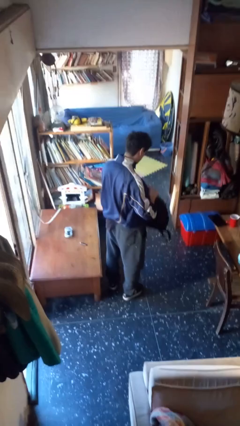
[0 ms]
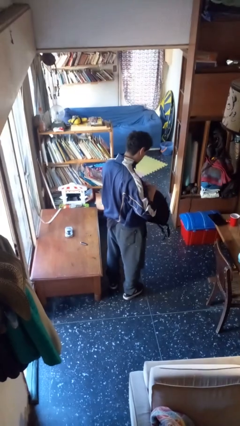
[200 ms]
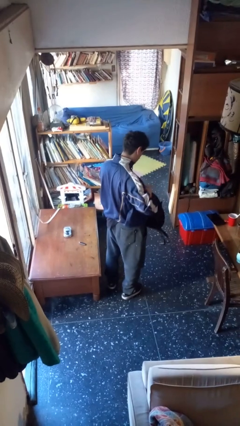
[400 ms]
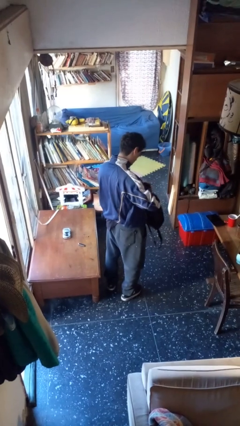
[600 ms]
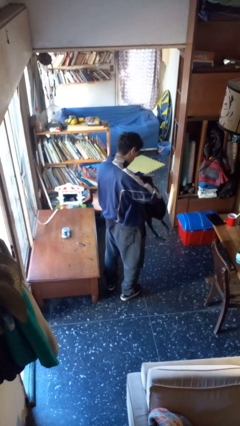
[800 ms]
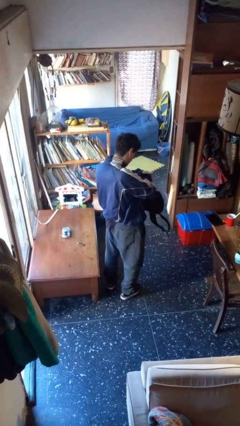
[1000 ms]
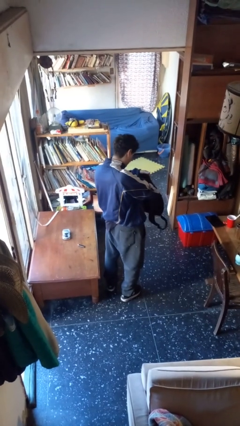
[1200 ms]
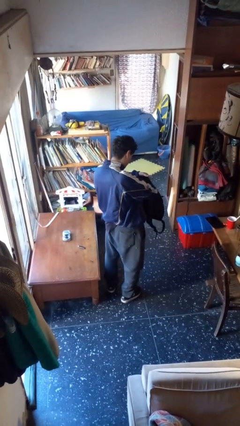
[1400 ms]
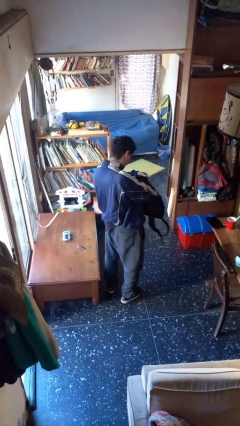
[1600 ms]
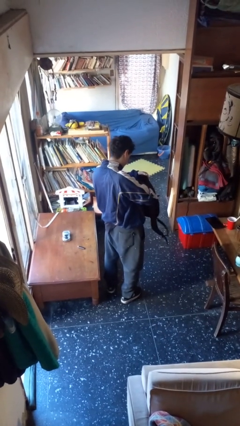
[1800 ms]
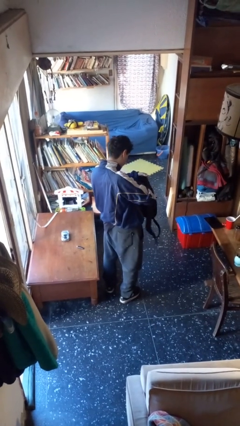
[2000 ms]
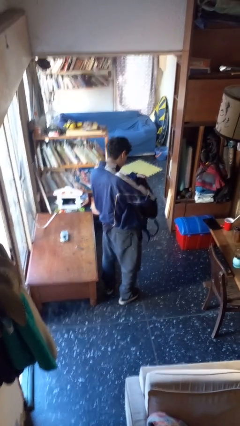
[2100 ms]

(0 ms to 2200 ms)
person searches in backpack

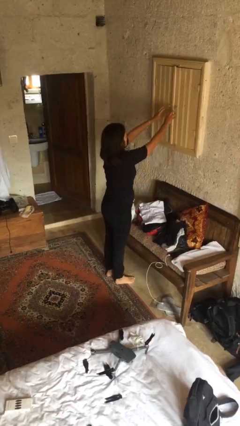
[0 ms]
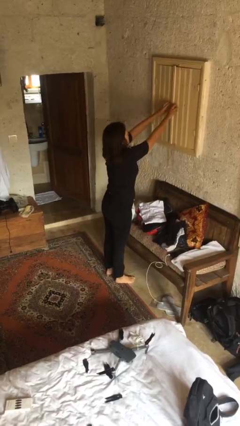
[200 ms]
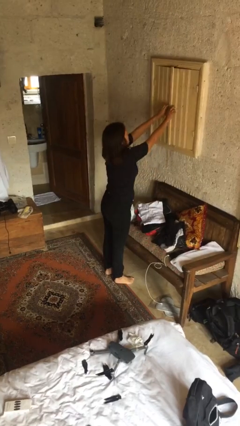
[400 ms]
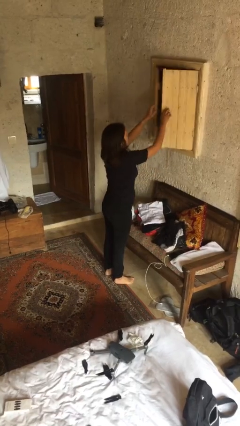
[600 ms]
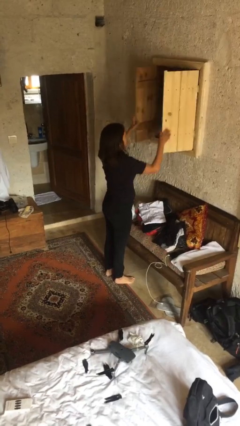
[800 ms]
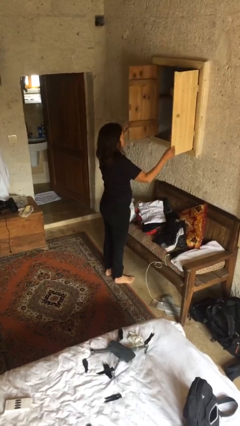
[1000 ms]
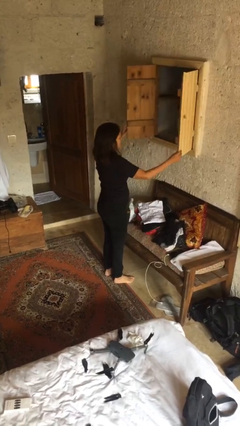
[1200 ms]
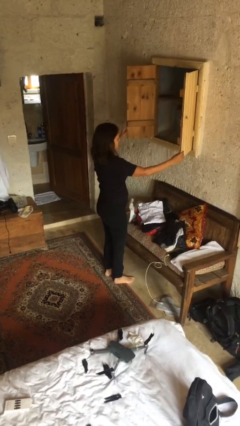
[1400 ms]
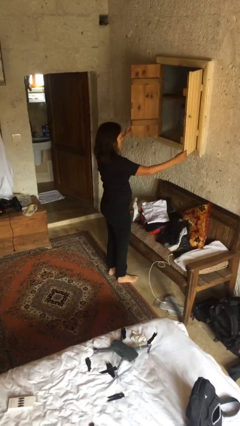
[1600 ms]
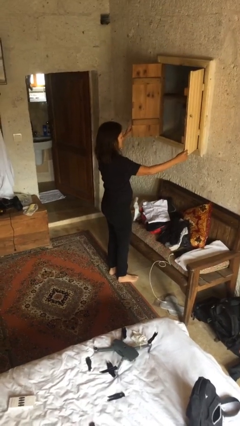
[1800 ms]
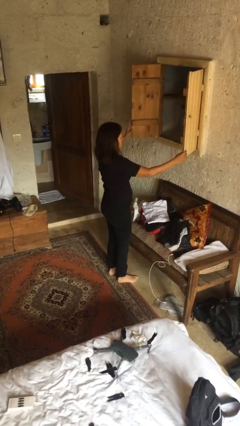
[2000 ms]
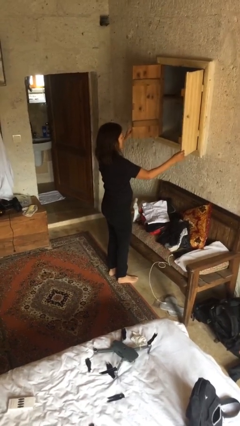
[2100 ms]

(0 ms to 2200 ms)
person opens dresser drawer

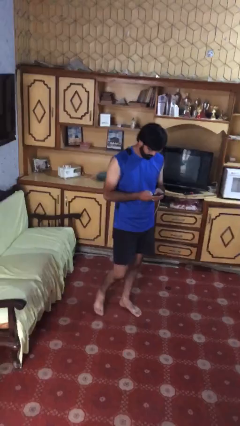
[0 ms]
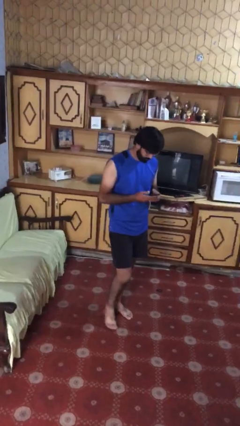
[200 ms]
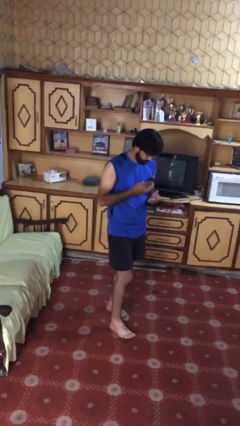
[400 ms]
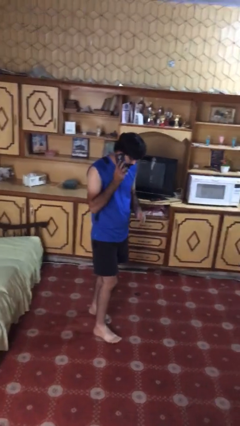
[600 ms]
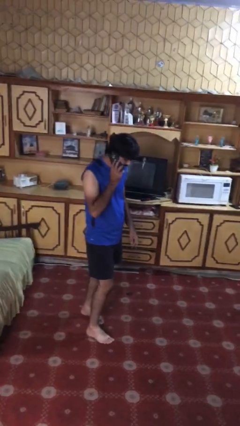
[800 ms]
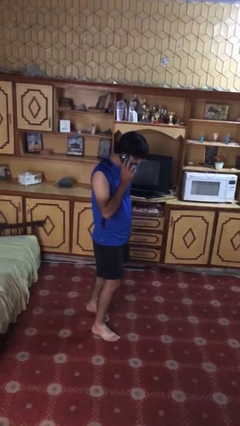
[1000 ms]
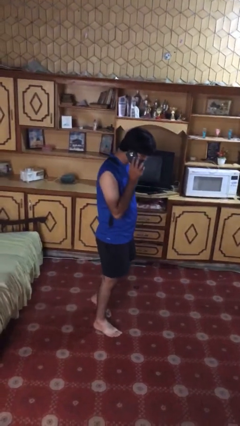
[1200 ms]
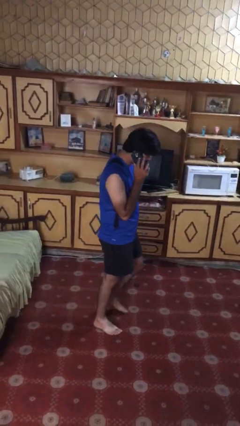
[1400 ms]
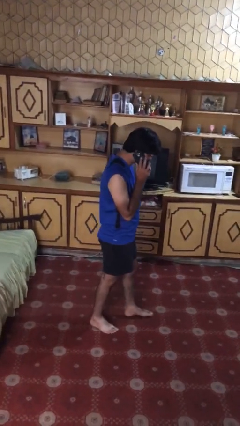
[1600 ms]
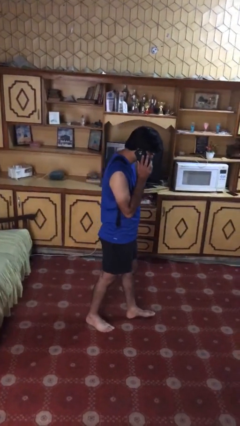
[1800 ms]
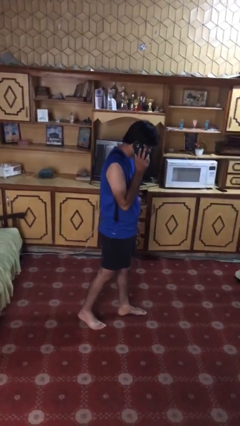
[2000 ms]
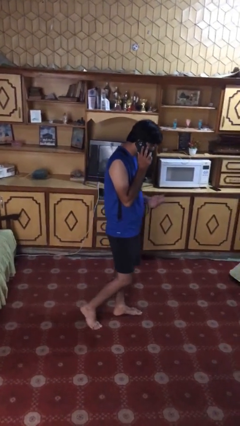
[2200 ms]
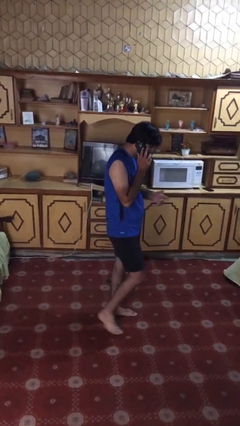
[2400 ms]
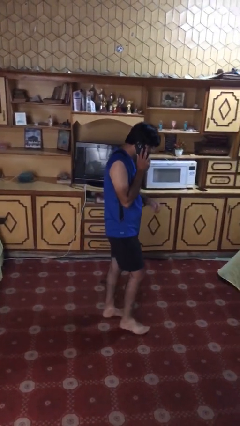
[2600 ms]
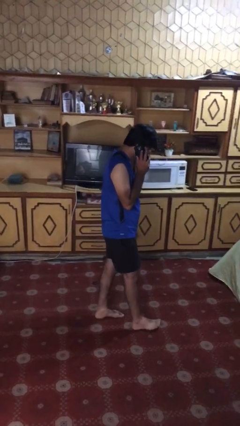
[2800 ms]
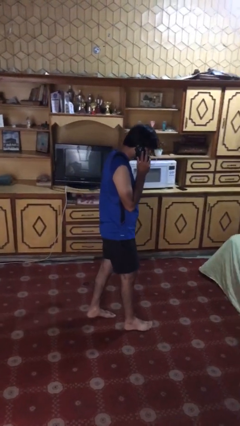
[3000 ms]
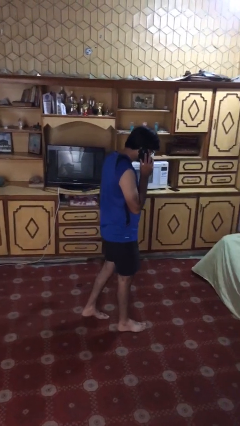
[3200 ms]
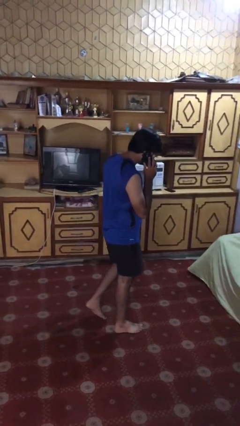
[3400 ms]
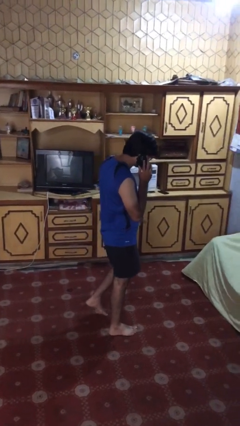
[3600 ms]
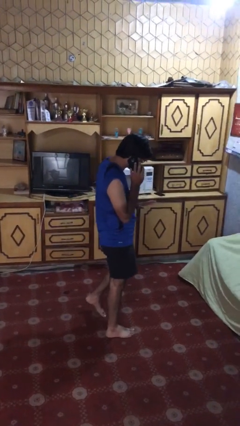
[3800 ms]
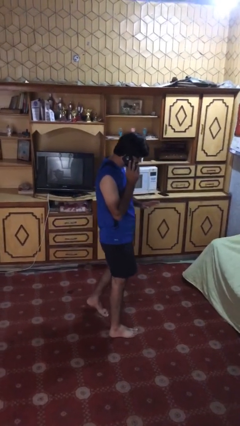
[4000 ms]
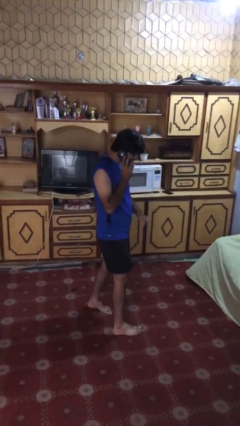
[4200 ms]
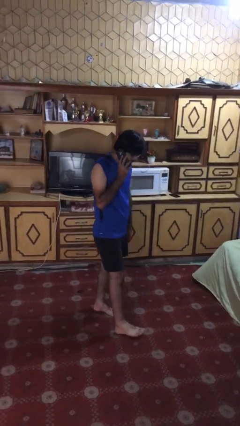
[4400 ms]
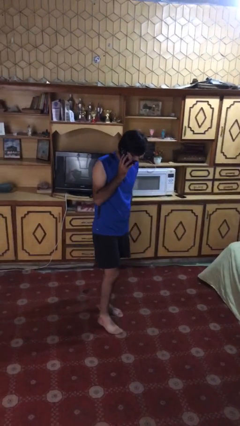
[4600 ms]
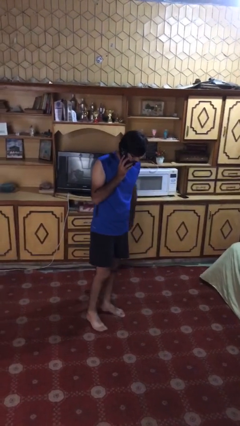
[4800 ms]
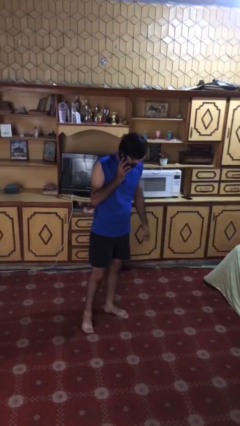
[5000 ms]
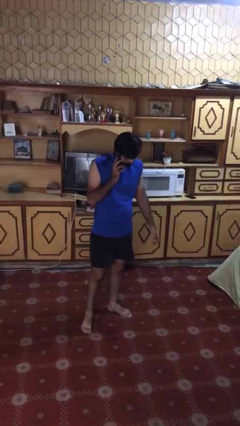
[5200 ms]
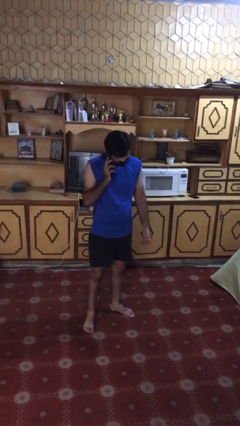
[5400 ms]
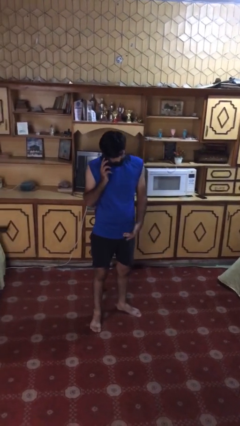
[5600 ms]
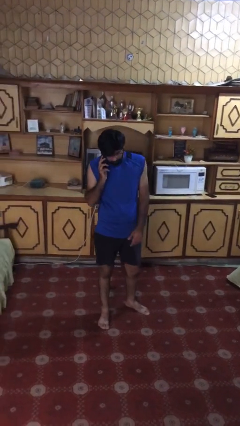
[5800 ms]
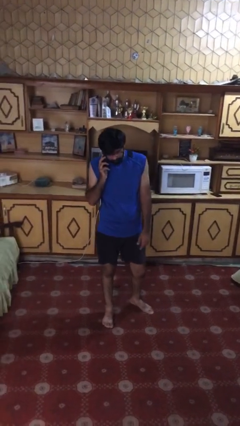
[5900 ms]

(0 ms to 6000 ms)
person talks on phone

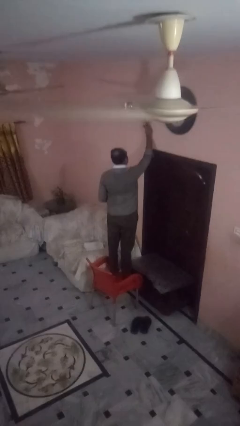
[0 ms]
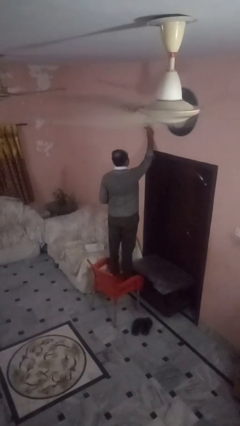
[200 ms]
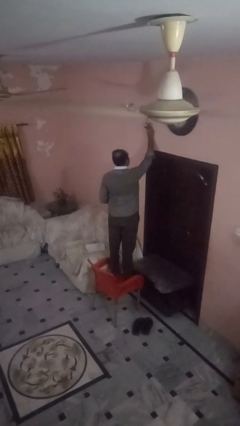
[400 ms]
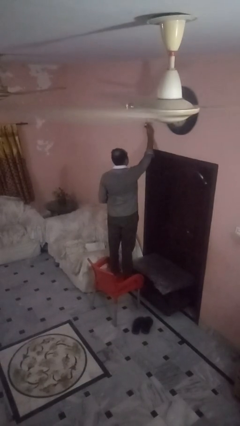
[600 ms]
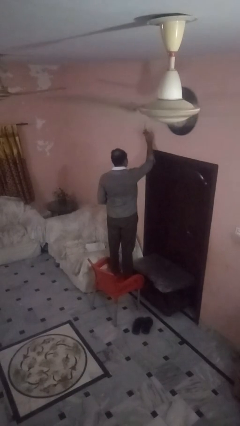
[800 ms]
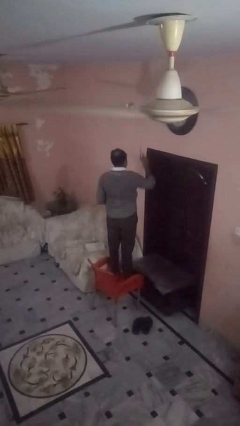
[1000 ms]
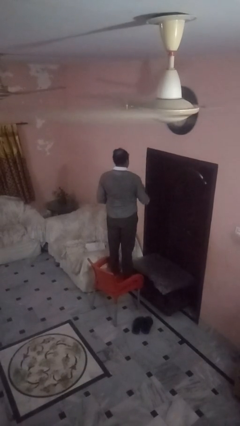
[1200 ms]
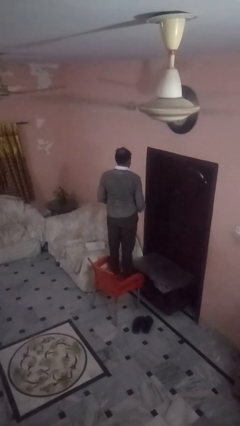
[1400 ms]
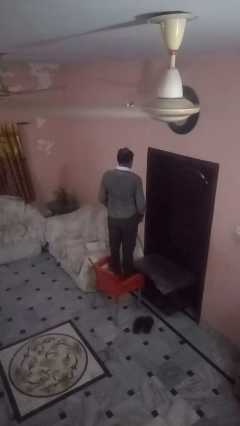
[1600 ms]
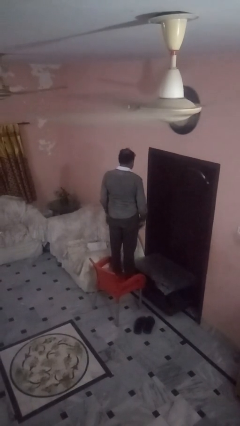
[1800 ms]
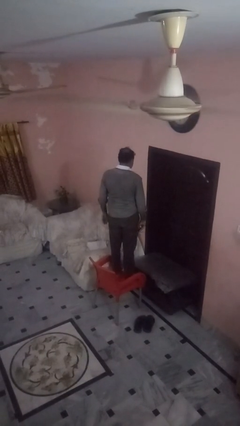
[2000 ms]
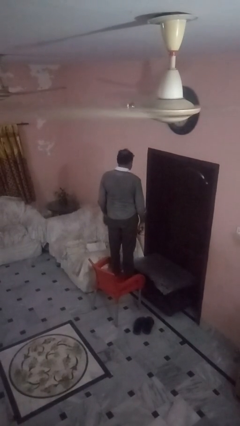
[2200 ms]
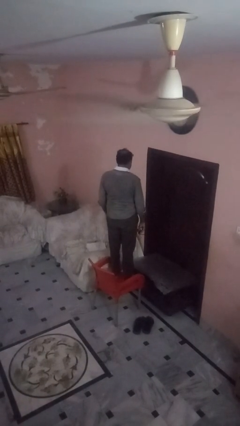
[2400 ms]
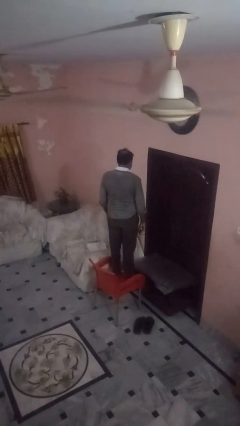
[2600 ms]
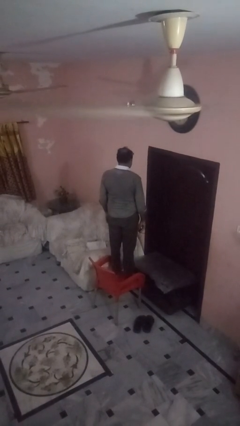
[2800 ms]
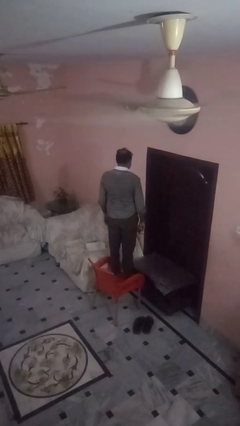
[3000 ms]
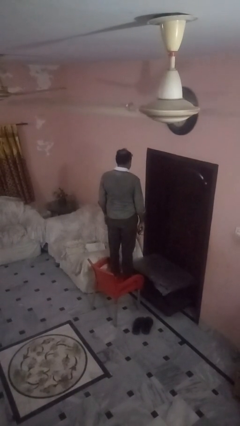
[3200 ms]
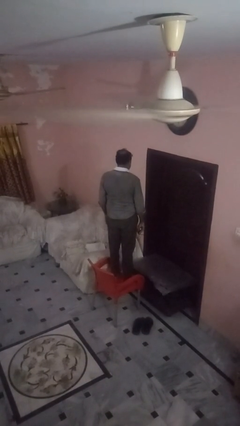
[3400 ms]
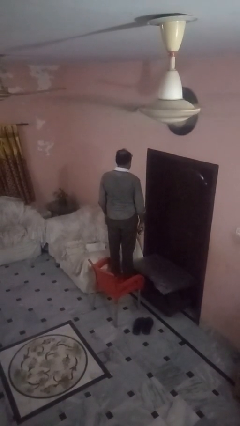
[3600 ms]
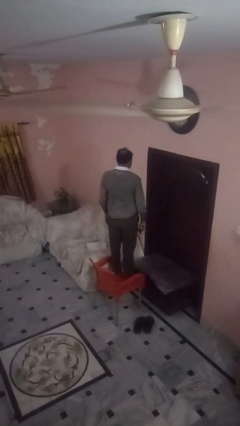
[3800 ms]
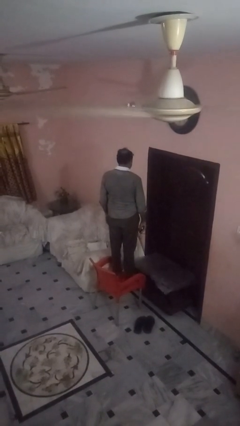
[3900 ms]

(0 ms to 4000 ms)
person takes down smoke detector

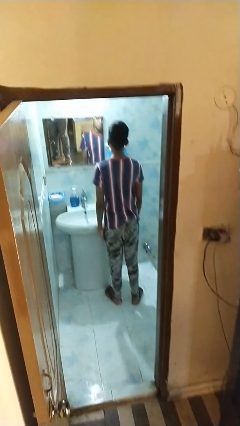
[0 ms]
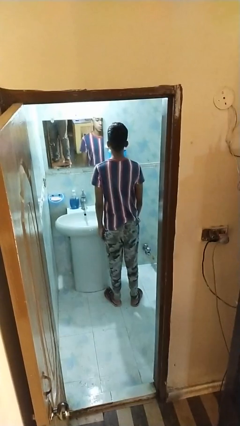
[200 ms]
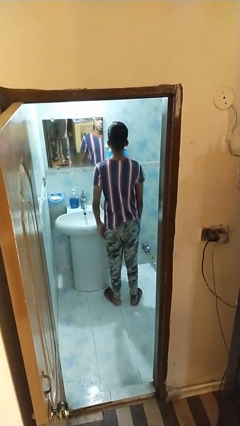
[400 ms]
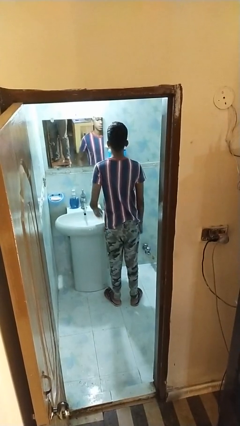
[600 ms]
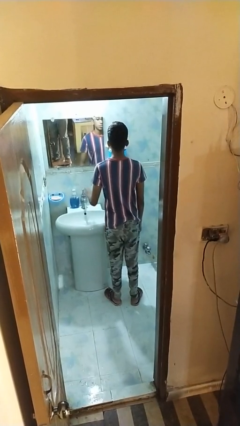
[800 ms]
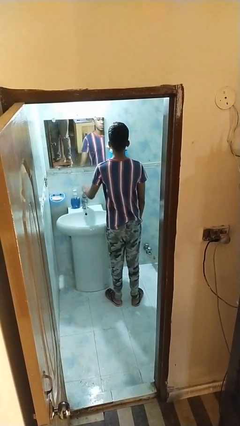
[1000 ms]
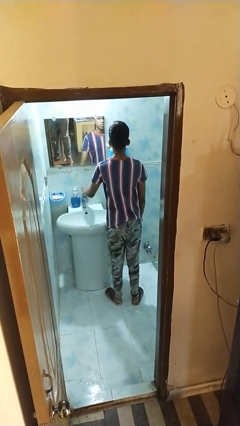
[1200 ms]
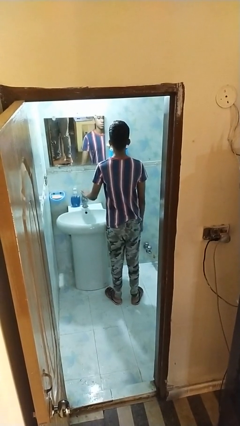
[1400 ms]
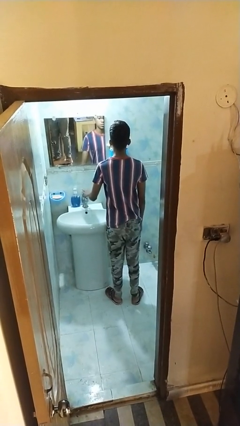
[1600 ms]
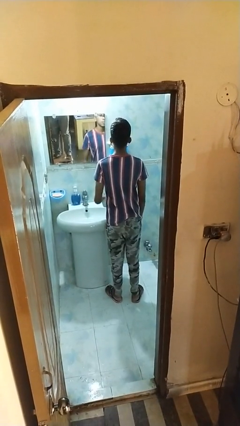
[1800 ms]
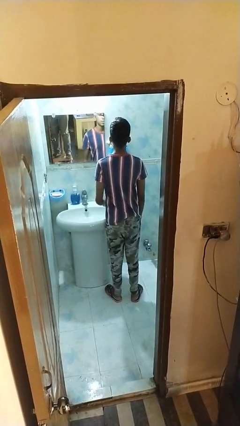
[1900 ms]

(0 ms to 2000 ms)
person turns off faucet

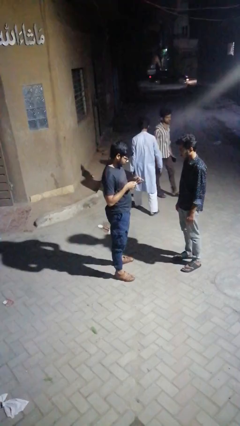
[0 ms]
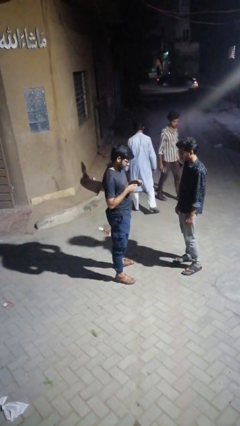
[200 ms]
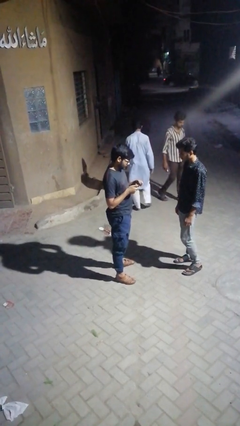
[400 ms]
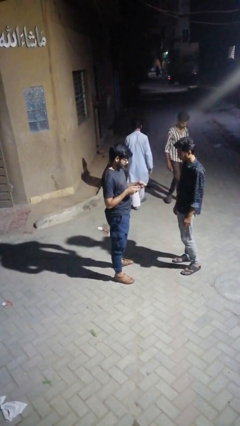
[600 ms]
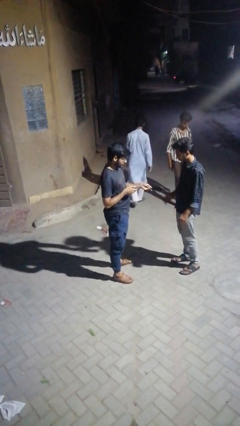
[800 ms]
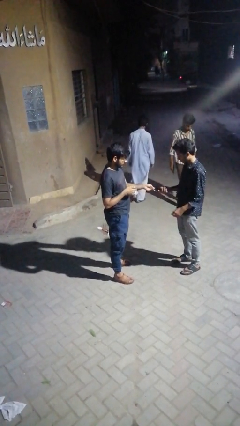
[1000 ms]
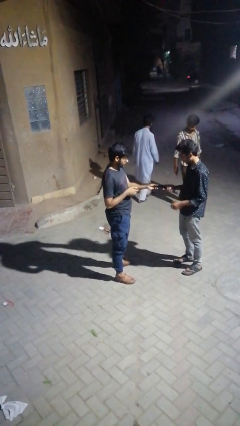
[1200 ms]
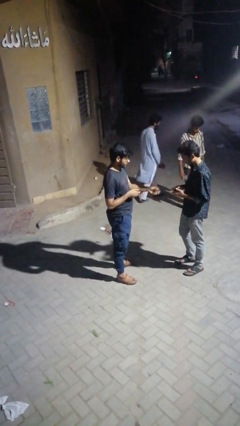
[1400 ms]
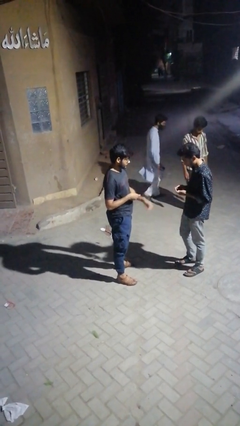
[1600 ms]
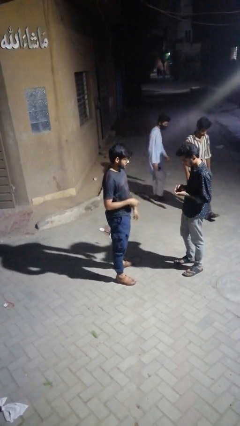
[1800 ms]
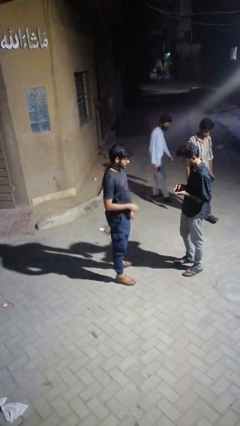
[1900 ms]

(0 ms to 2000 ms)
person transfers object to person
